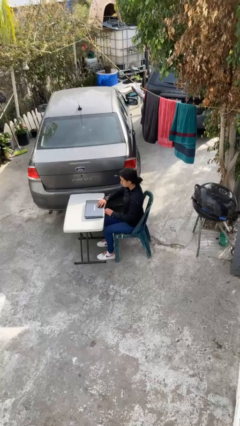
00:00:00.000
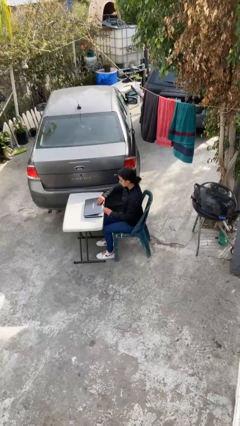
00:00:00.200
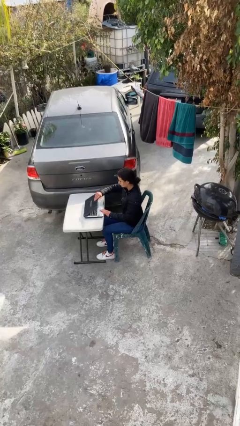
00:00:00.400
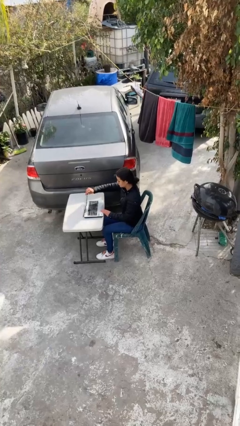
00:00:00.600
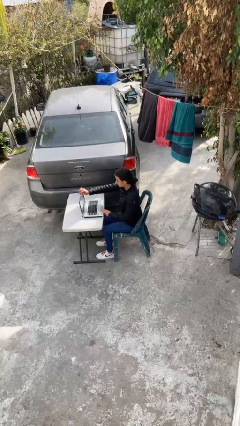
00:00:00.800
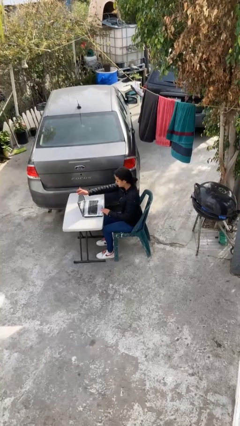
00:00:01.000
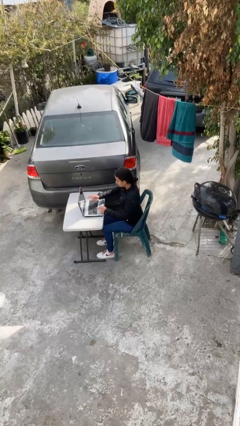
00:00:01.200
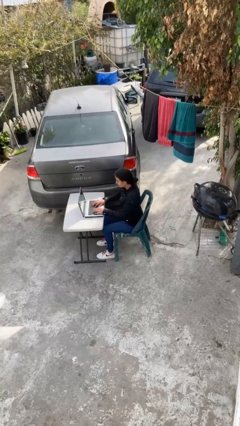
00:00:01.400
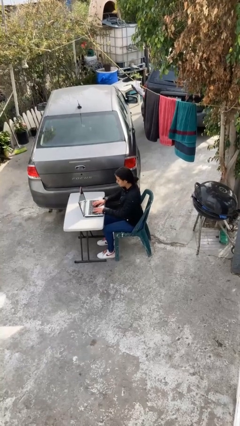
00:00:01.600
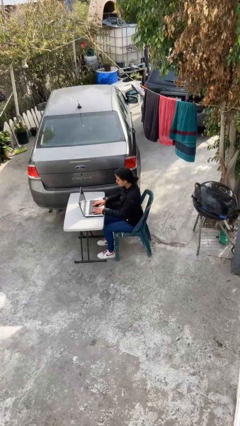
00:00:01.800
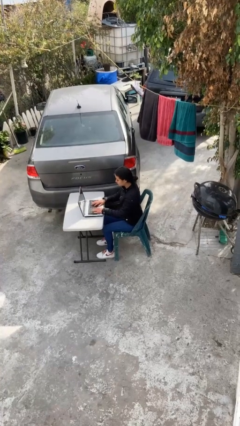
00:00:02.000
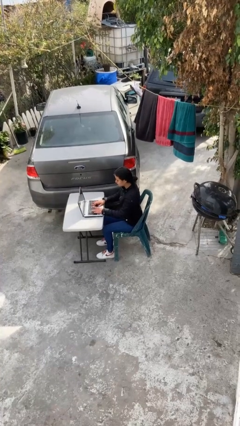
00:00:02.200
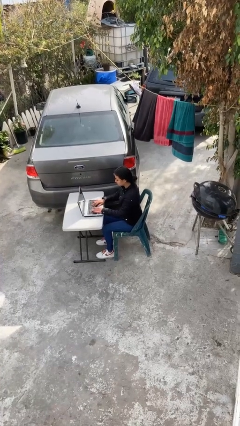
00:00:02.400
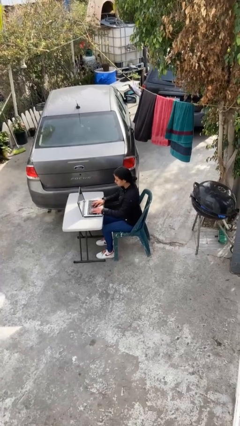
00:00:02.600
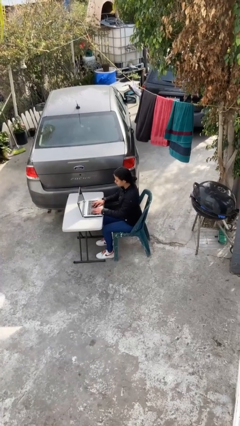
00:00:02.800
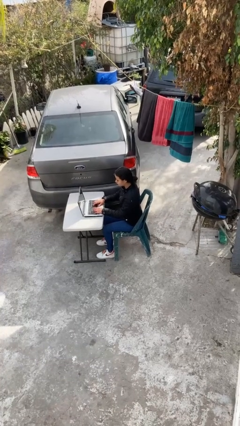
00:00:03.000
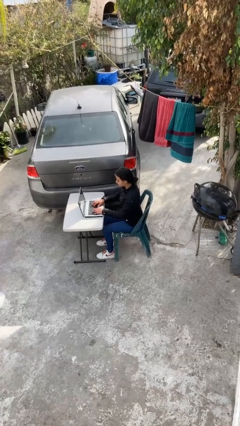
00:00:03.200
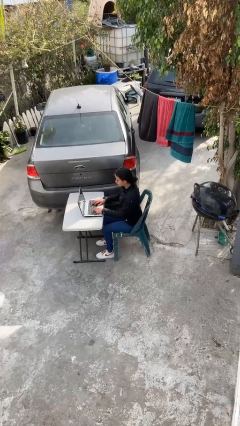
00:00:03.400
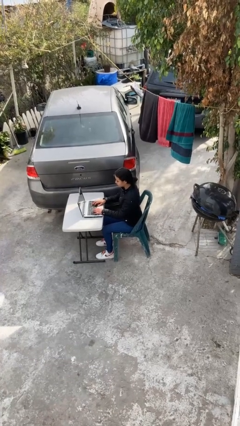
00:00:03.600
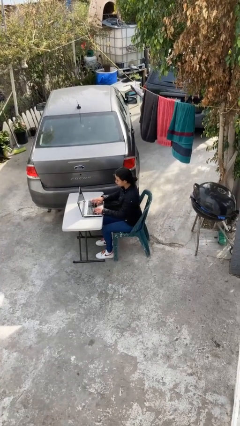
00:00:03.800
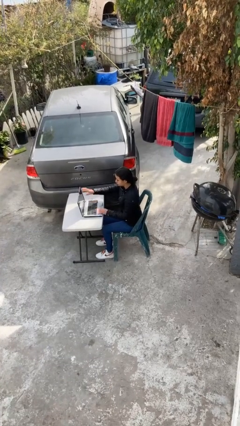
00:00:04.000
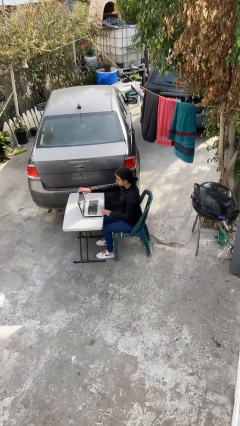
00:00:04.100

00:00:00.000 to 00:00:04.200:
person interacts with laptop

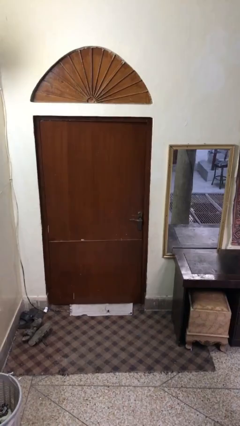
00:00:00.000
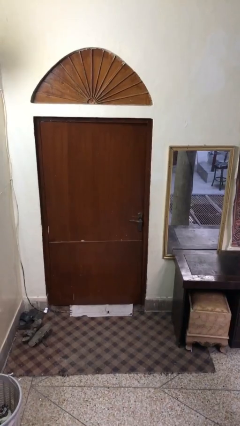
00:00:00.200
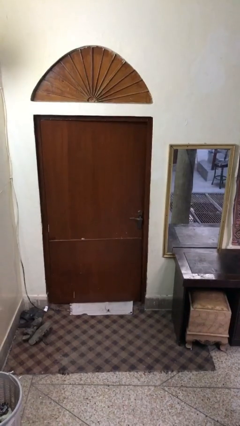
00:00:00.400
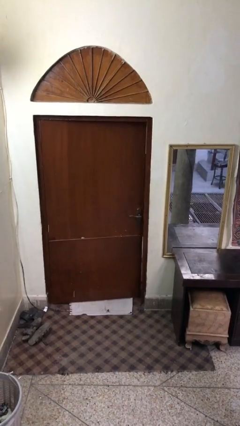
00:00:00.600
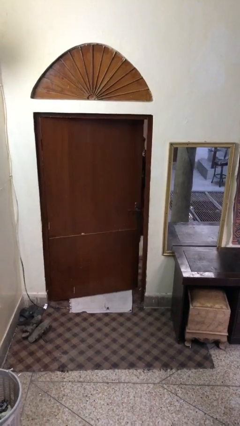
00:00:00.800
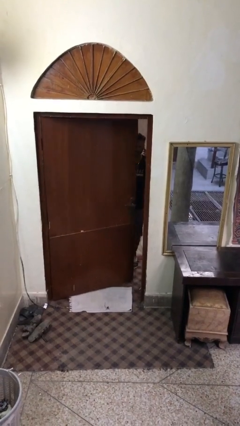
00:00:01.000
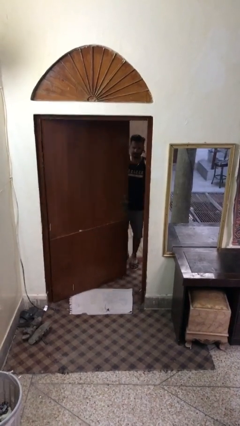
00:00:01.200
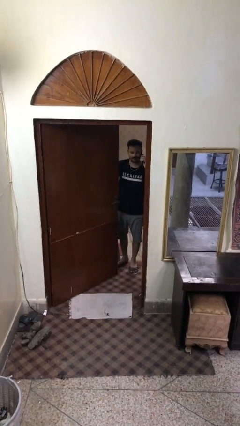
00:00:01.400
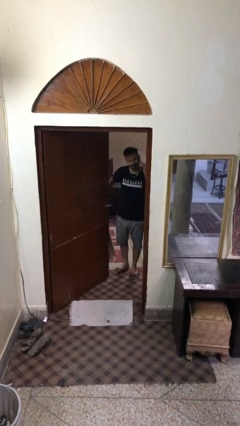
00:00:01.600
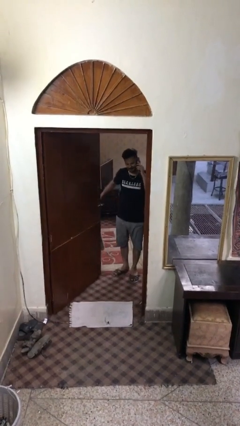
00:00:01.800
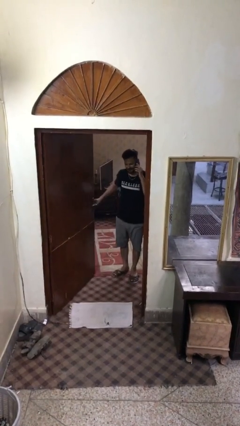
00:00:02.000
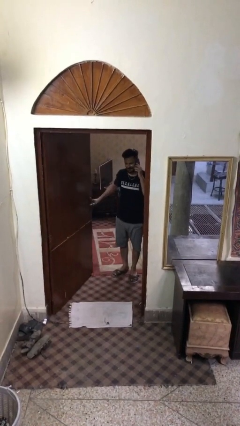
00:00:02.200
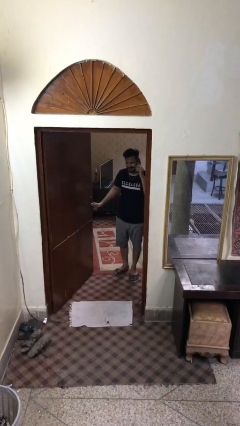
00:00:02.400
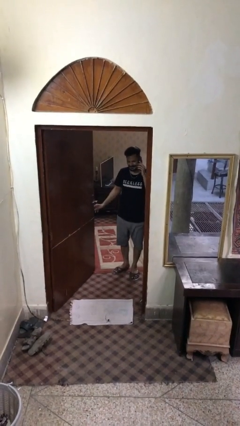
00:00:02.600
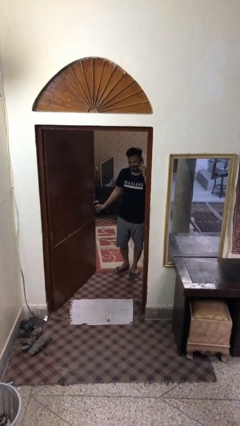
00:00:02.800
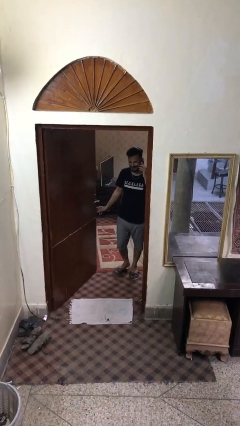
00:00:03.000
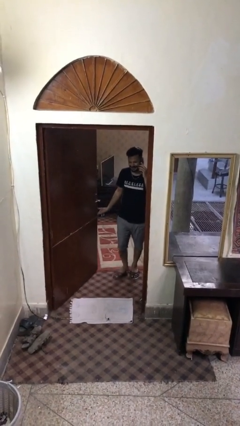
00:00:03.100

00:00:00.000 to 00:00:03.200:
person opens facility door

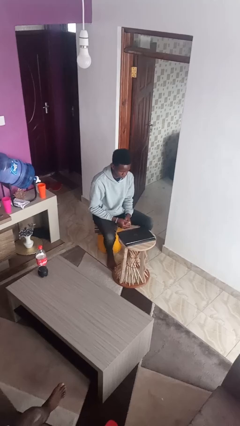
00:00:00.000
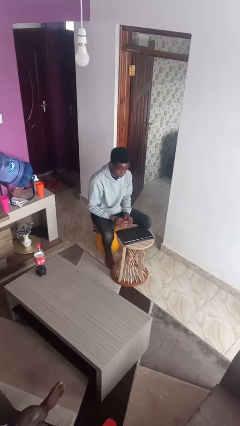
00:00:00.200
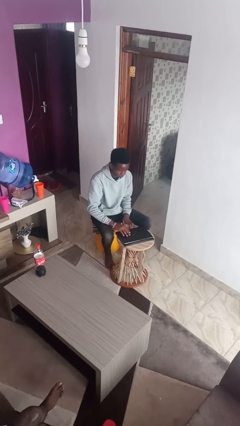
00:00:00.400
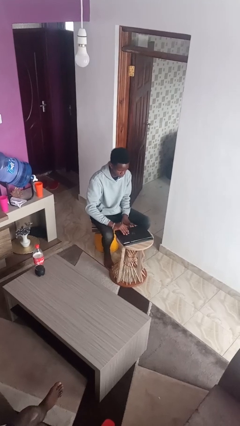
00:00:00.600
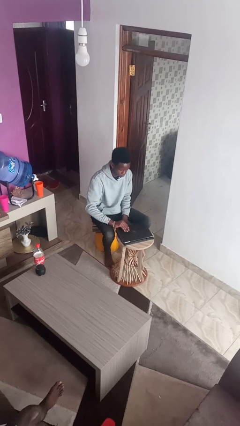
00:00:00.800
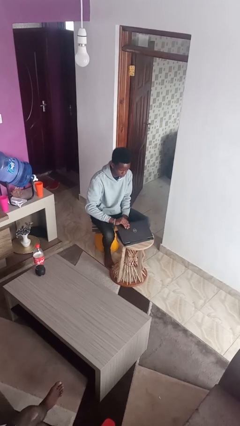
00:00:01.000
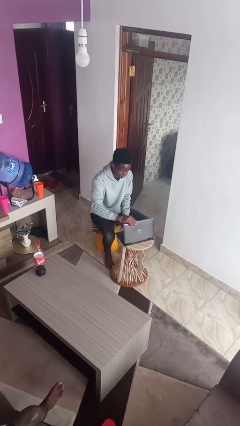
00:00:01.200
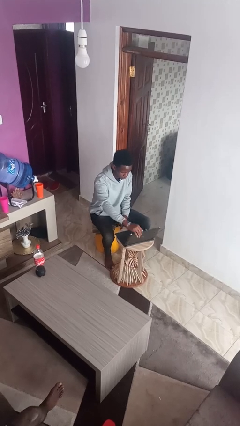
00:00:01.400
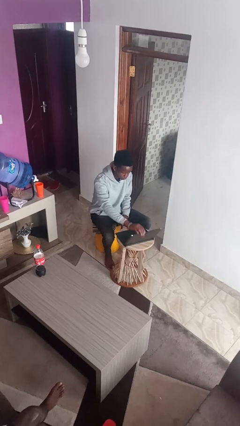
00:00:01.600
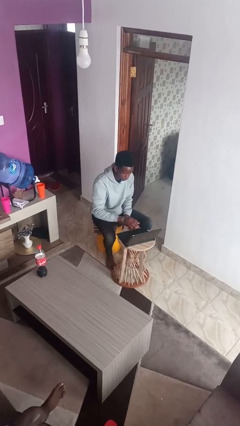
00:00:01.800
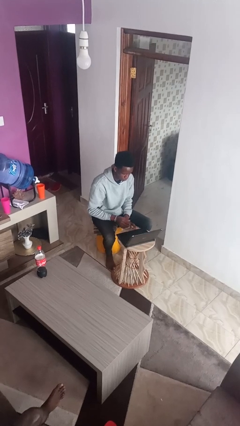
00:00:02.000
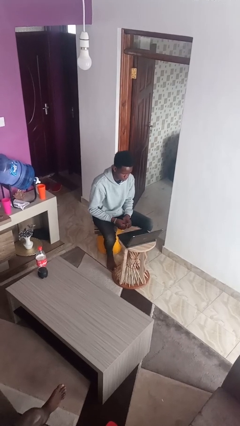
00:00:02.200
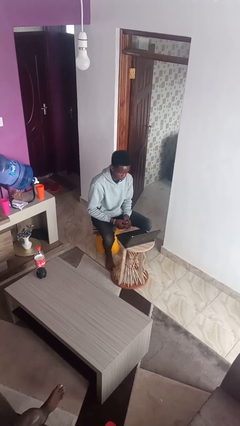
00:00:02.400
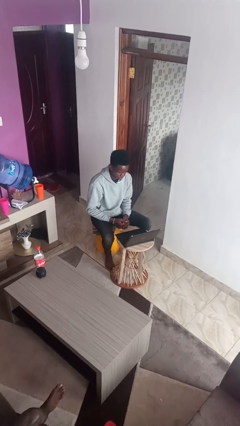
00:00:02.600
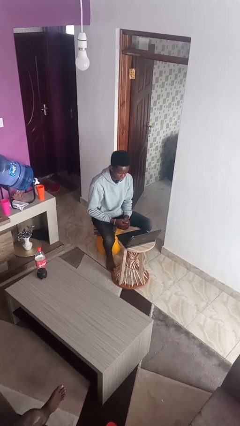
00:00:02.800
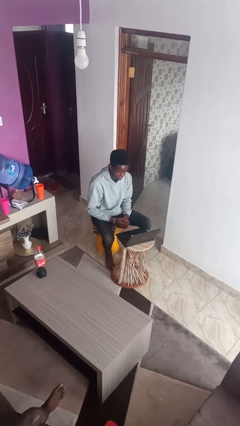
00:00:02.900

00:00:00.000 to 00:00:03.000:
person opens laptop

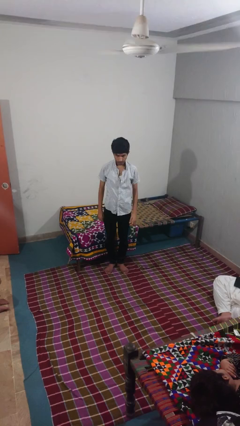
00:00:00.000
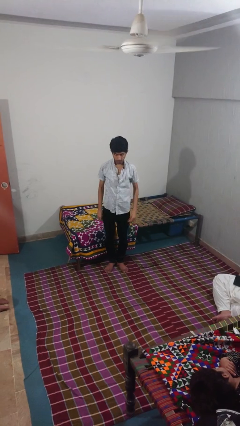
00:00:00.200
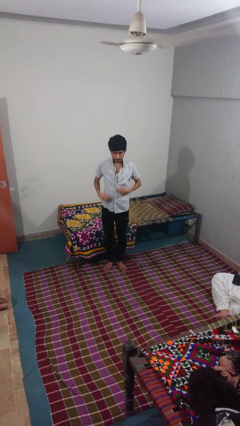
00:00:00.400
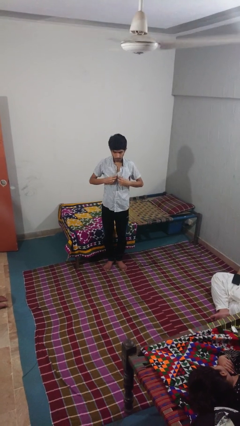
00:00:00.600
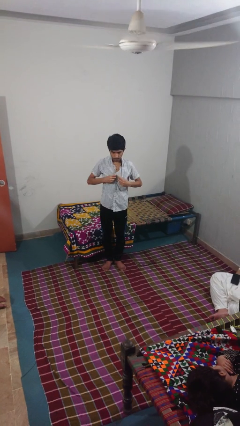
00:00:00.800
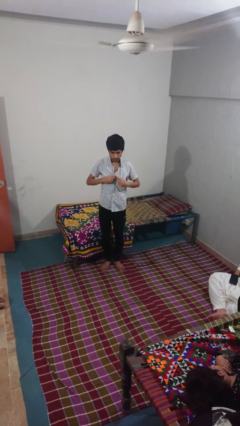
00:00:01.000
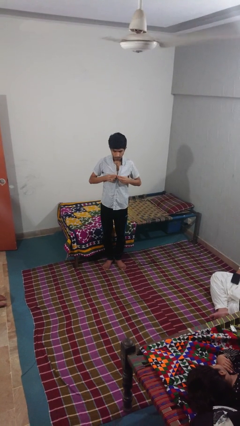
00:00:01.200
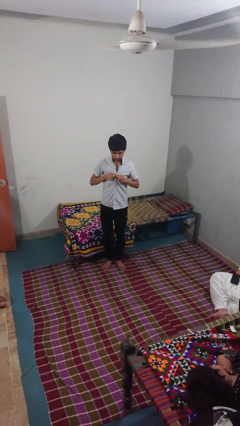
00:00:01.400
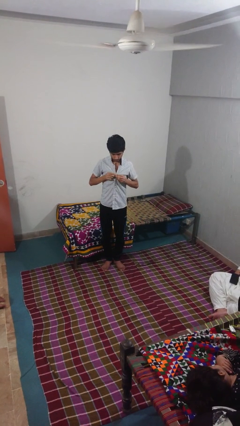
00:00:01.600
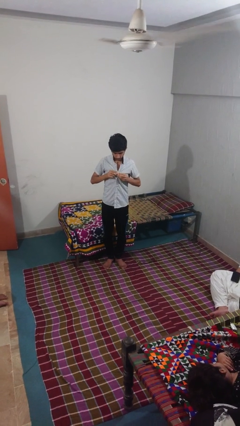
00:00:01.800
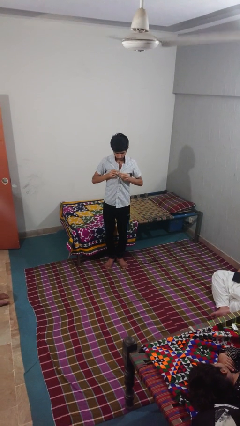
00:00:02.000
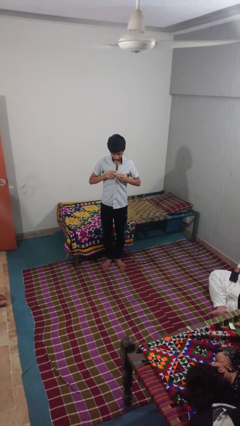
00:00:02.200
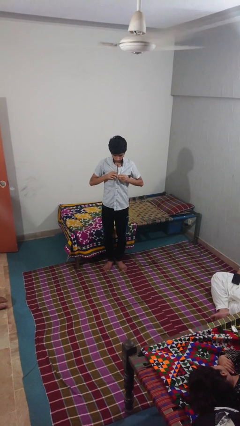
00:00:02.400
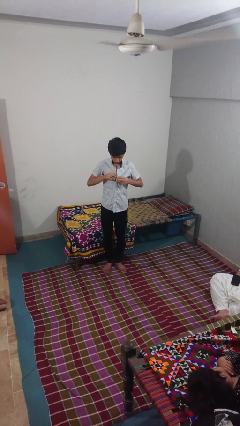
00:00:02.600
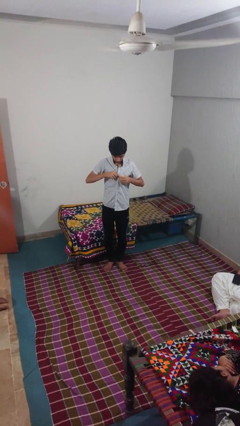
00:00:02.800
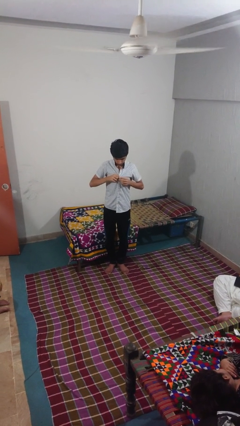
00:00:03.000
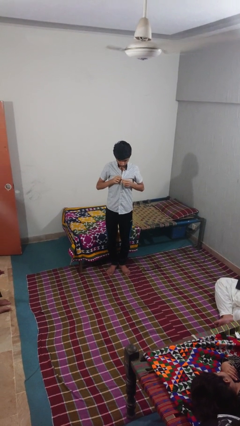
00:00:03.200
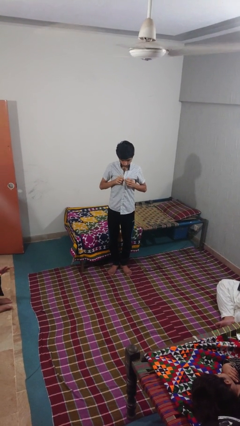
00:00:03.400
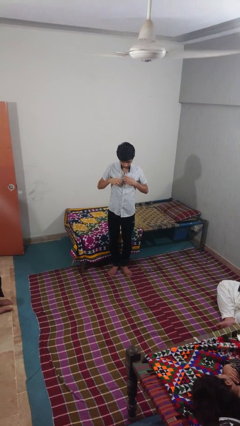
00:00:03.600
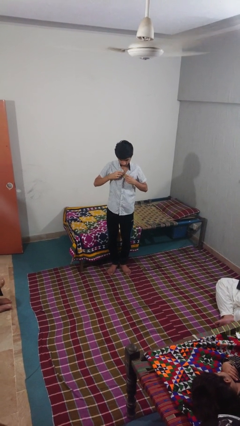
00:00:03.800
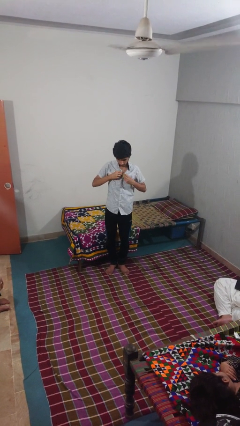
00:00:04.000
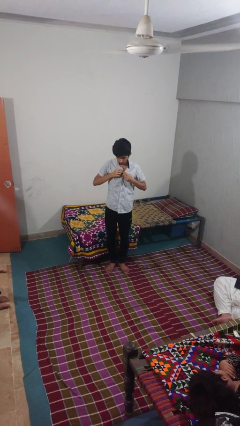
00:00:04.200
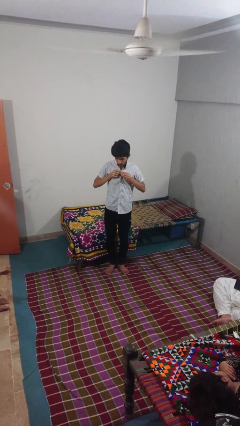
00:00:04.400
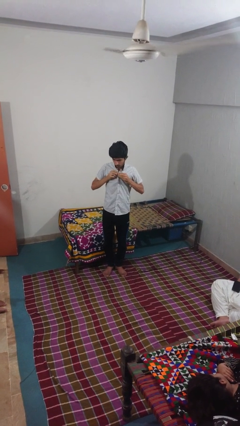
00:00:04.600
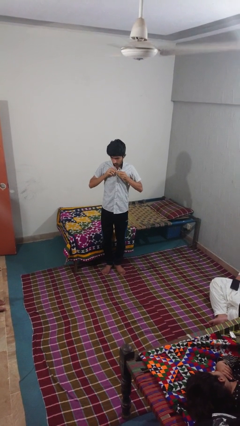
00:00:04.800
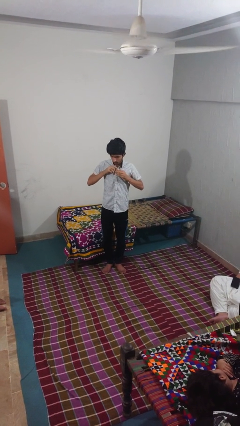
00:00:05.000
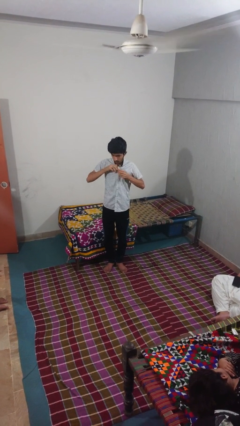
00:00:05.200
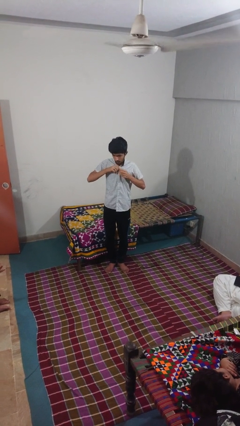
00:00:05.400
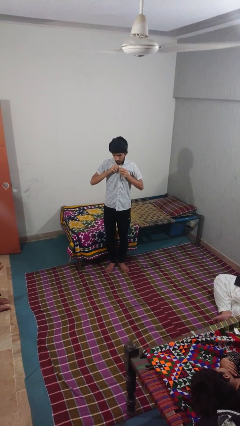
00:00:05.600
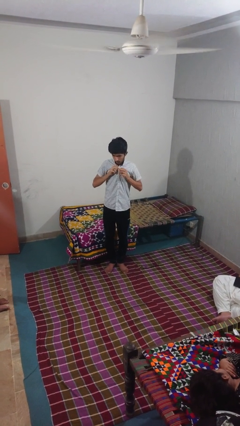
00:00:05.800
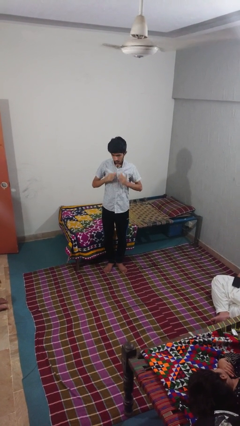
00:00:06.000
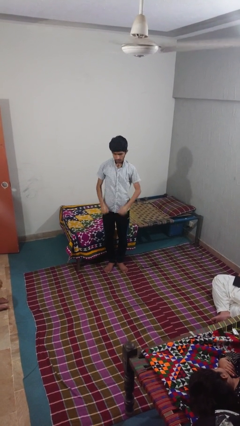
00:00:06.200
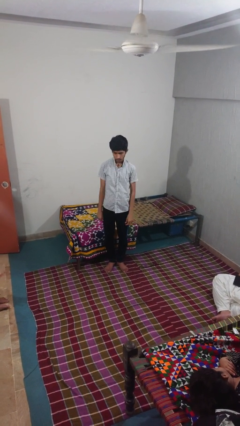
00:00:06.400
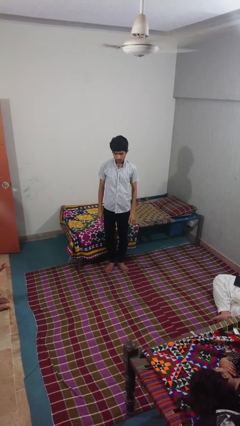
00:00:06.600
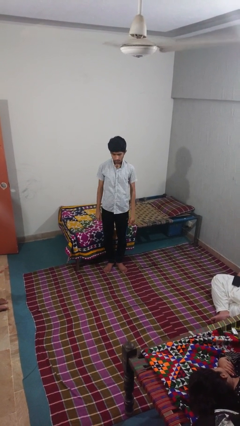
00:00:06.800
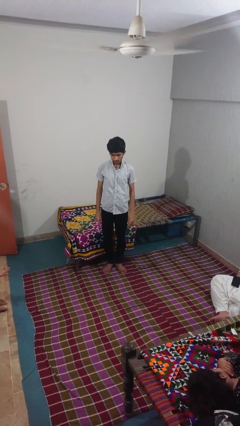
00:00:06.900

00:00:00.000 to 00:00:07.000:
person buttons shirt
